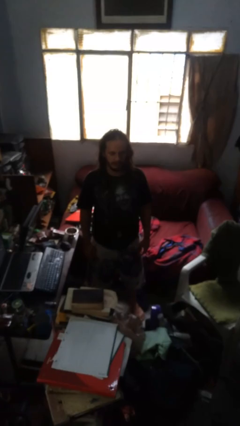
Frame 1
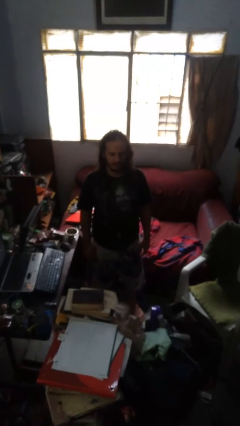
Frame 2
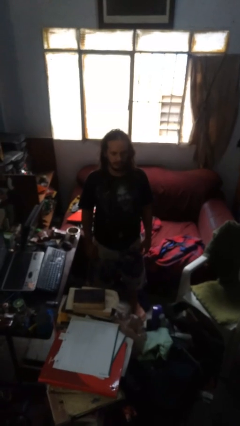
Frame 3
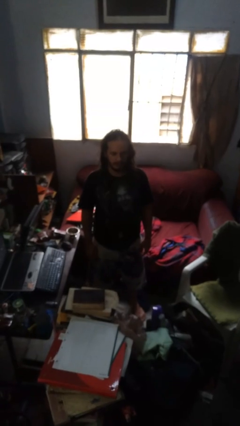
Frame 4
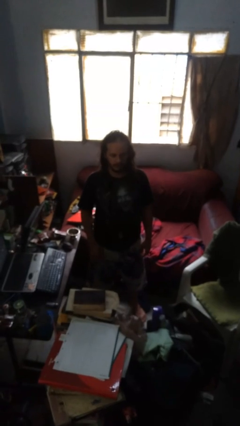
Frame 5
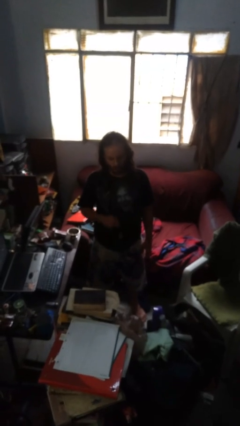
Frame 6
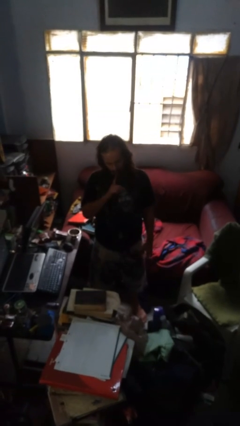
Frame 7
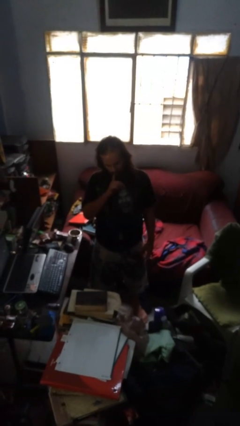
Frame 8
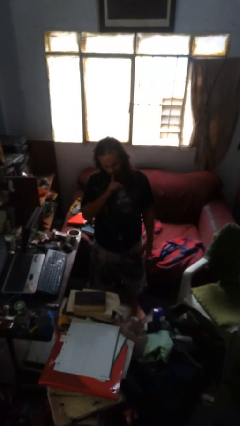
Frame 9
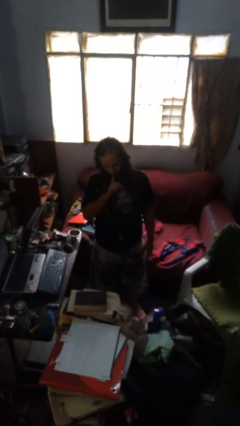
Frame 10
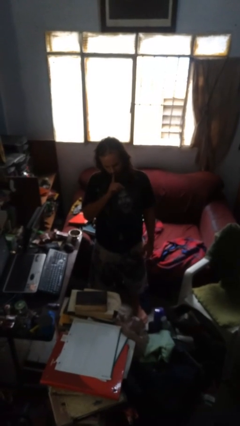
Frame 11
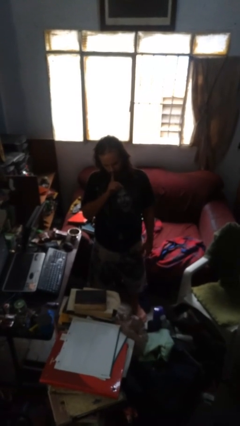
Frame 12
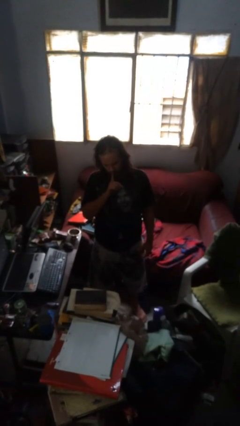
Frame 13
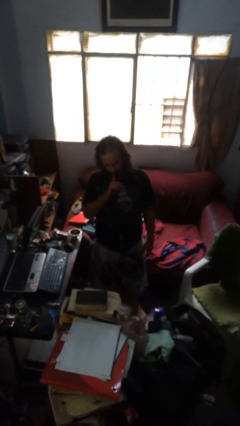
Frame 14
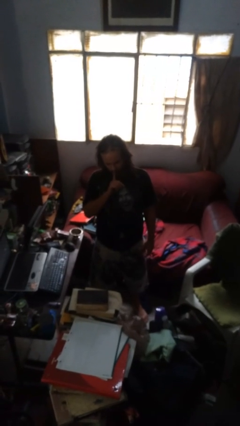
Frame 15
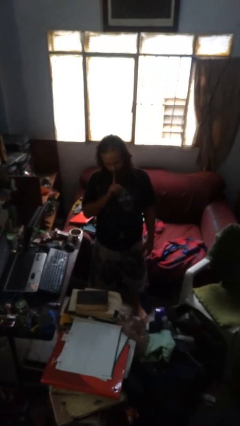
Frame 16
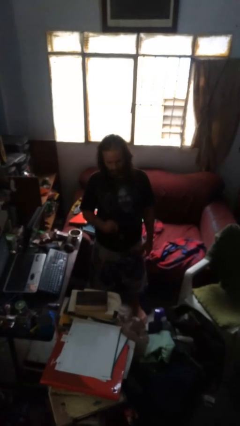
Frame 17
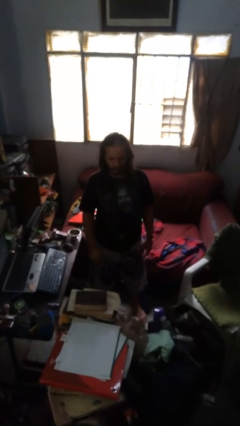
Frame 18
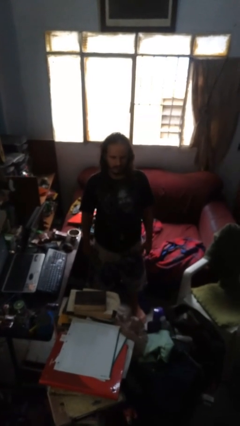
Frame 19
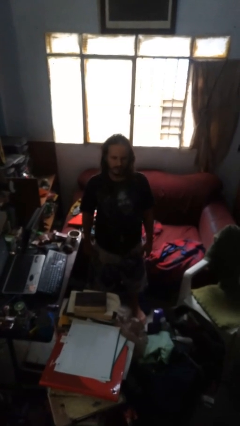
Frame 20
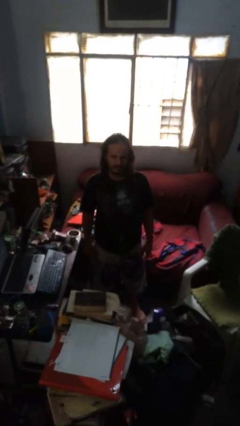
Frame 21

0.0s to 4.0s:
person gestures be quiet

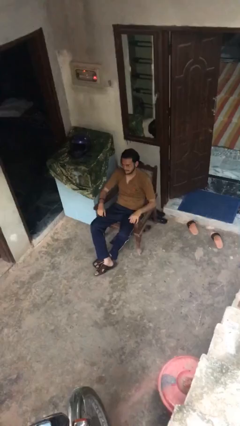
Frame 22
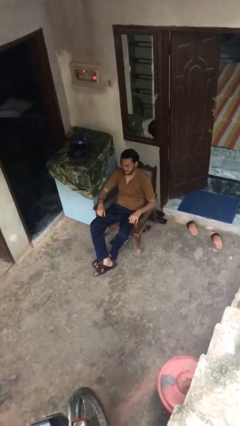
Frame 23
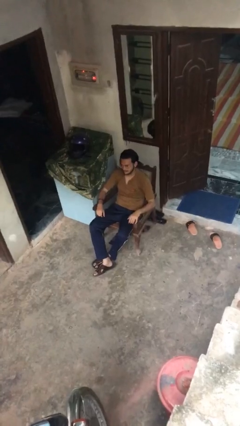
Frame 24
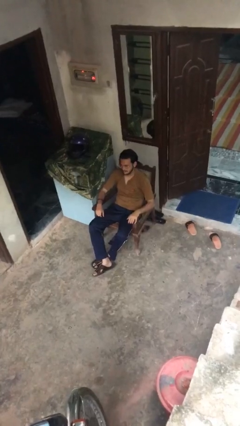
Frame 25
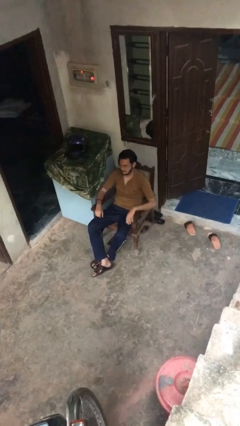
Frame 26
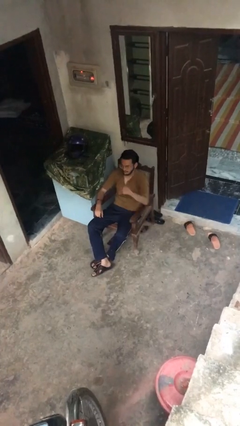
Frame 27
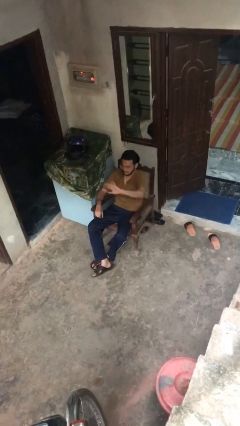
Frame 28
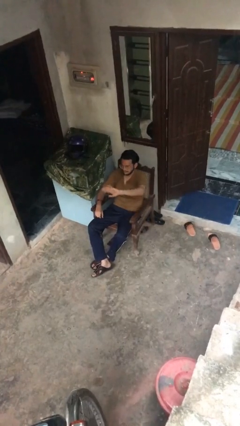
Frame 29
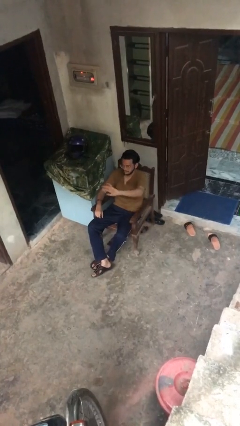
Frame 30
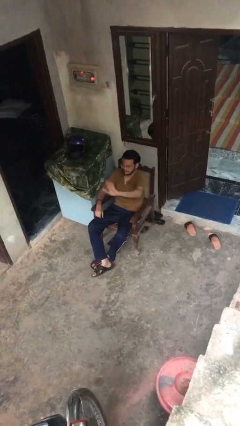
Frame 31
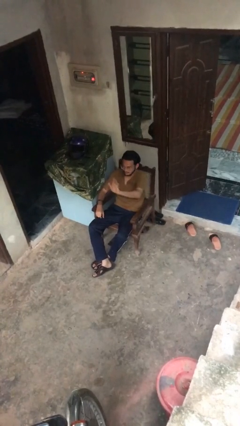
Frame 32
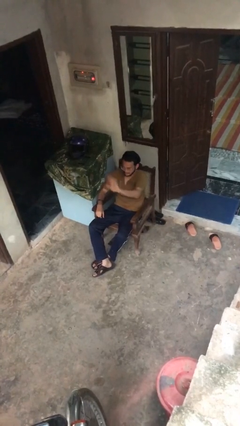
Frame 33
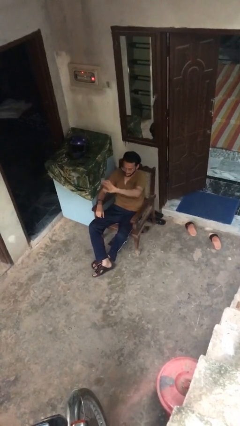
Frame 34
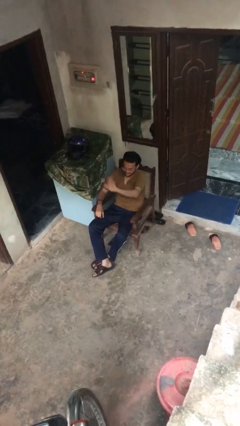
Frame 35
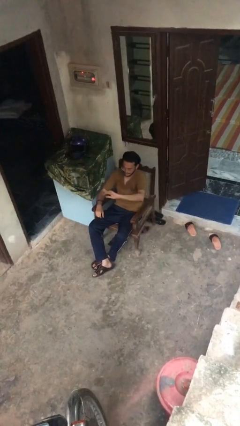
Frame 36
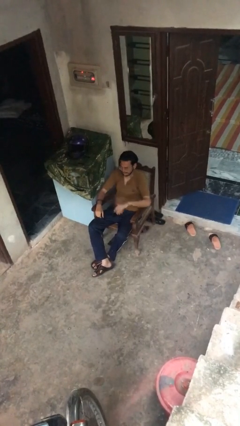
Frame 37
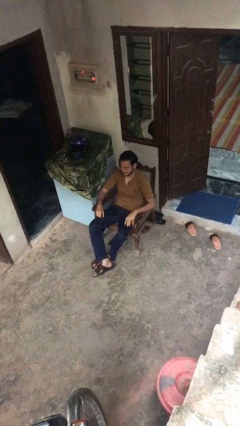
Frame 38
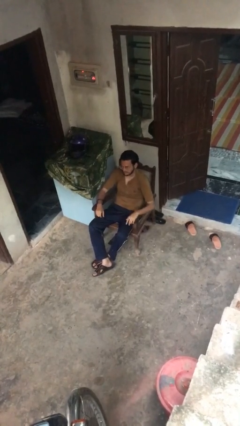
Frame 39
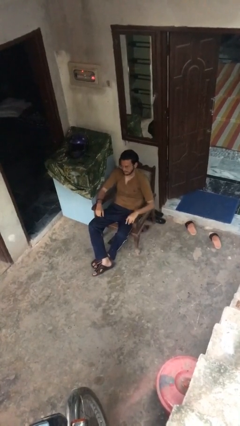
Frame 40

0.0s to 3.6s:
person waves at person

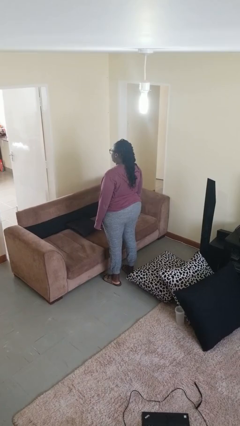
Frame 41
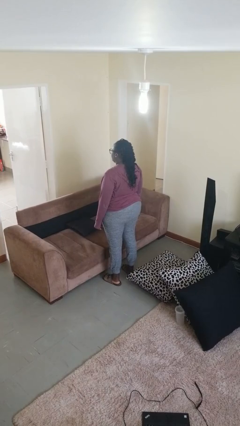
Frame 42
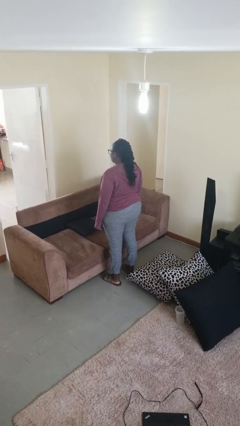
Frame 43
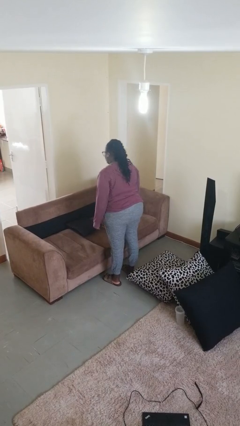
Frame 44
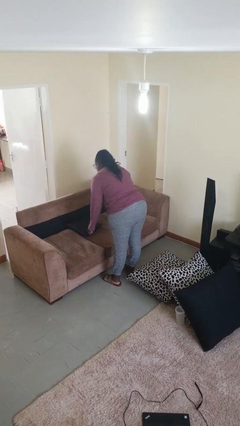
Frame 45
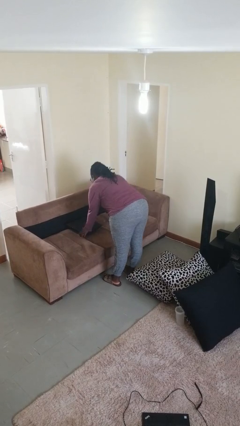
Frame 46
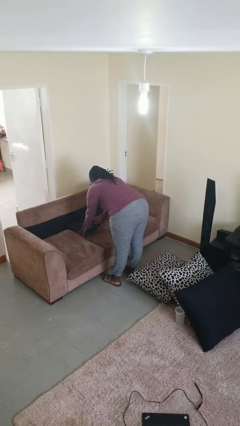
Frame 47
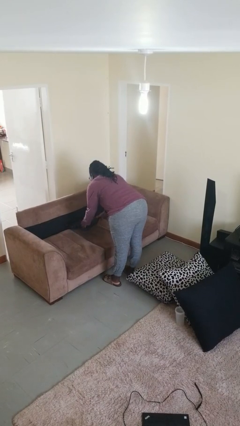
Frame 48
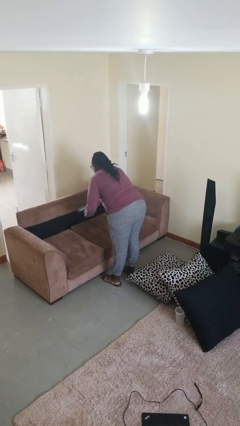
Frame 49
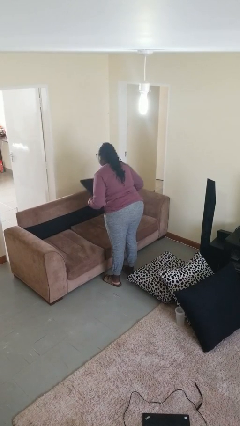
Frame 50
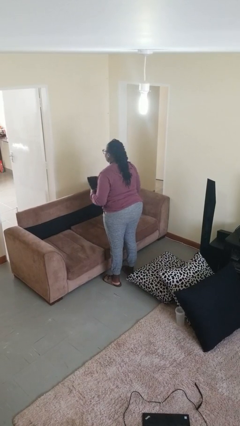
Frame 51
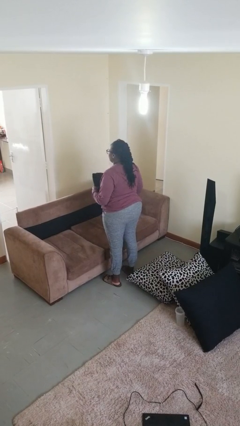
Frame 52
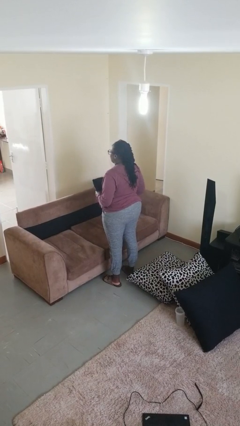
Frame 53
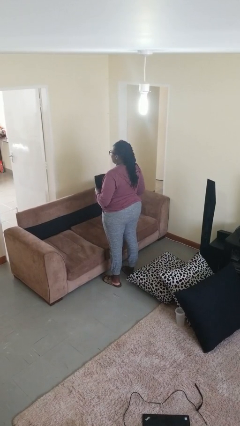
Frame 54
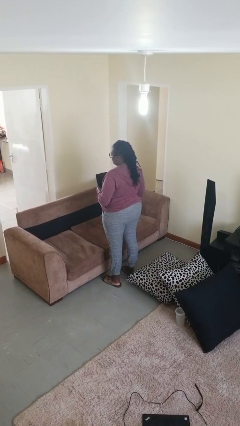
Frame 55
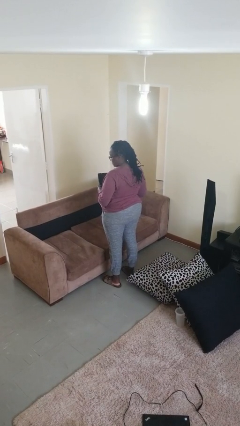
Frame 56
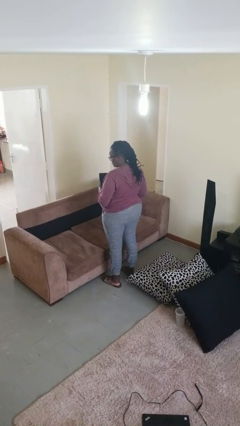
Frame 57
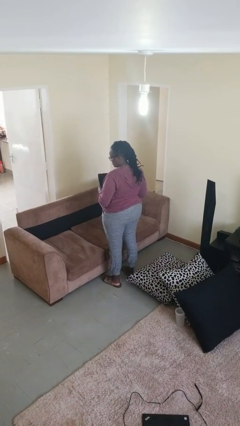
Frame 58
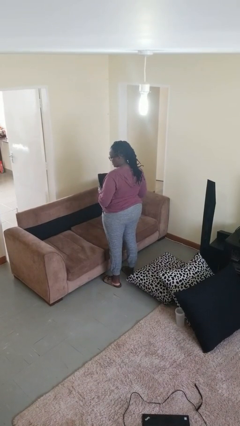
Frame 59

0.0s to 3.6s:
person picks up object from couch

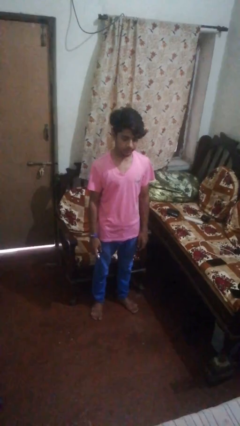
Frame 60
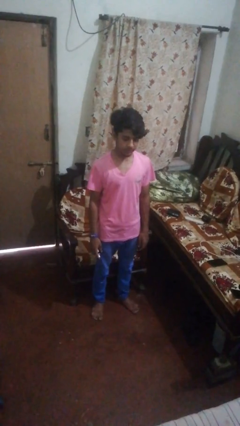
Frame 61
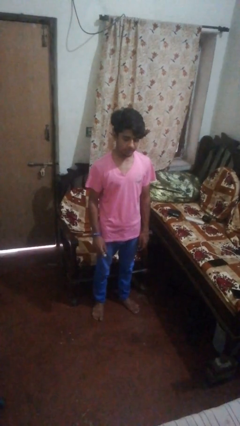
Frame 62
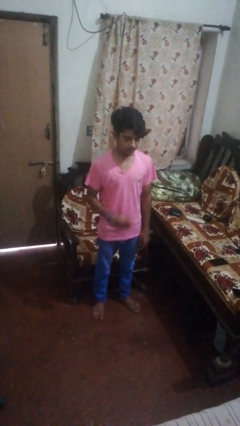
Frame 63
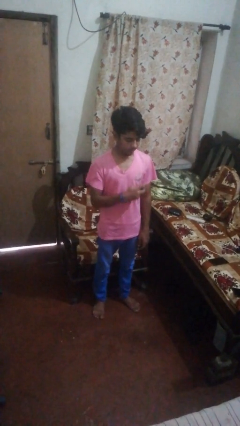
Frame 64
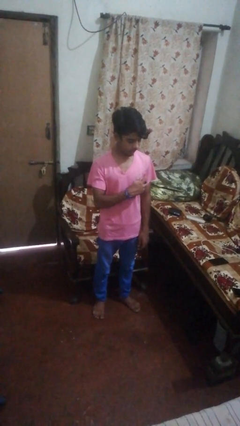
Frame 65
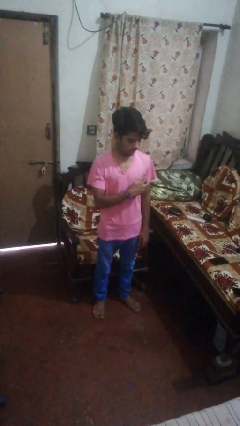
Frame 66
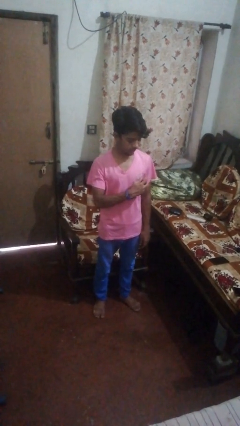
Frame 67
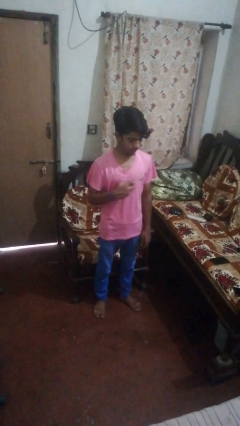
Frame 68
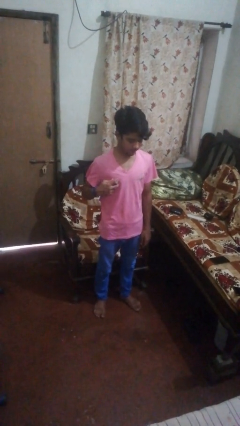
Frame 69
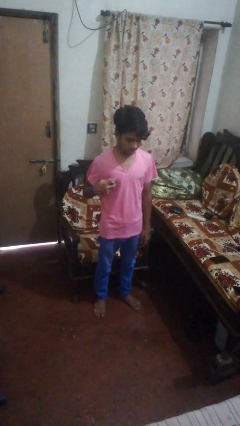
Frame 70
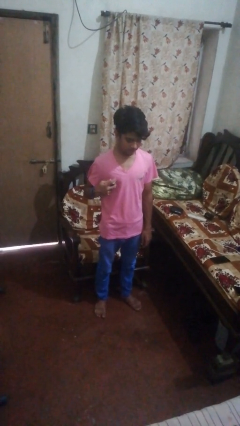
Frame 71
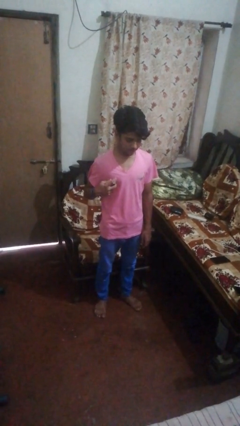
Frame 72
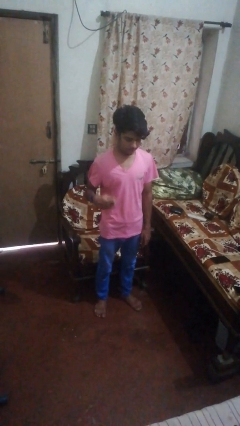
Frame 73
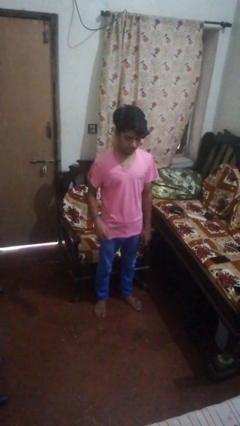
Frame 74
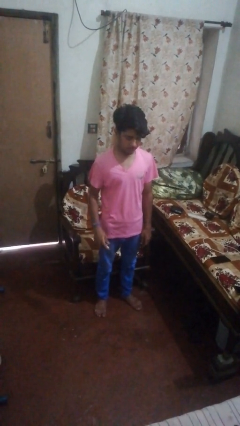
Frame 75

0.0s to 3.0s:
person applies deodorant

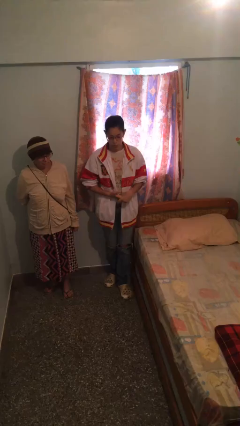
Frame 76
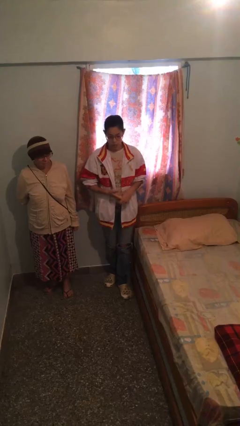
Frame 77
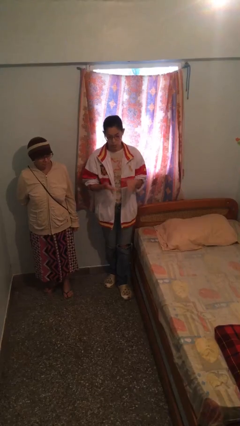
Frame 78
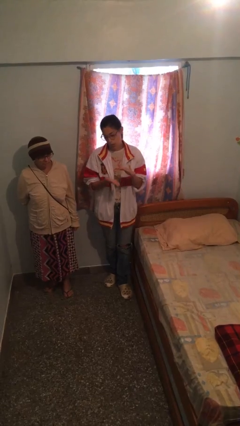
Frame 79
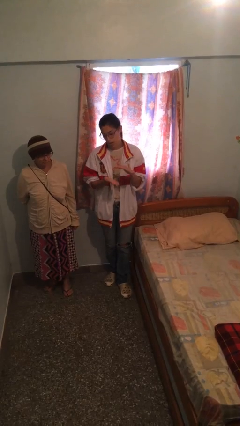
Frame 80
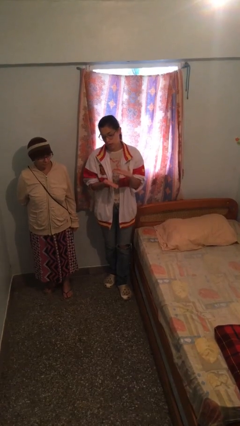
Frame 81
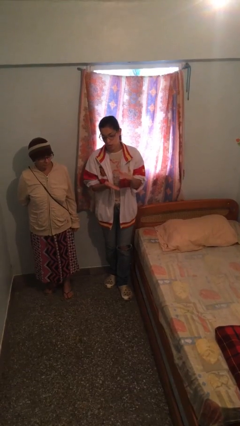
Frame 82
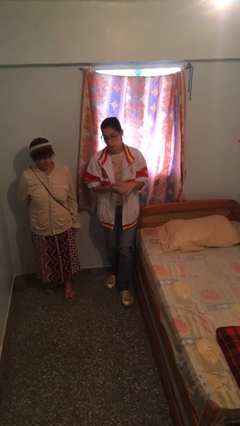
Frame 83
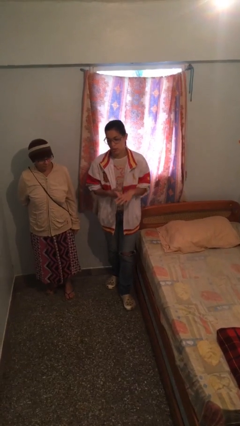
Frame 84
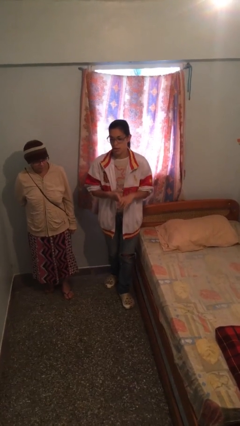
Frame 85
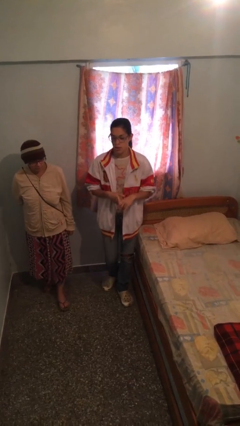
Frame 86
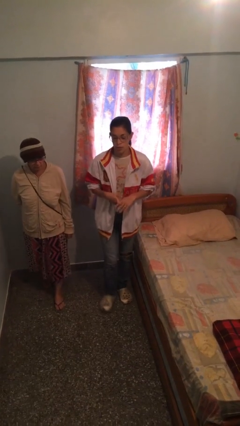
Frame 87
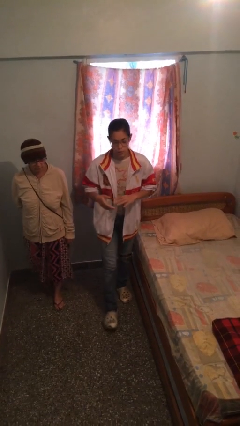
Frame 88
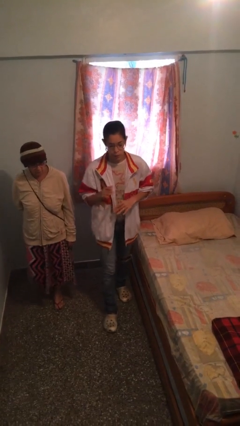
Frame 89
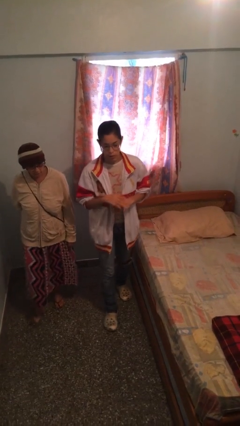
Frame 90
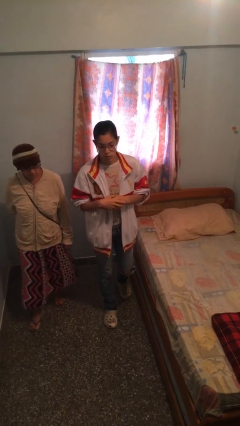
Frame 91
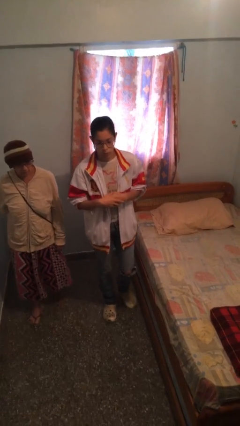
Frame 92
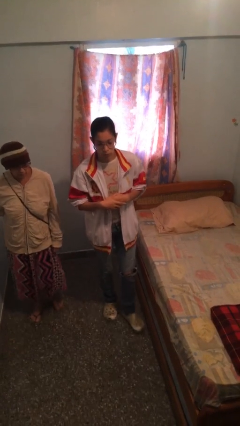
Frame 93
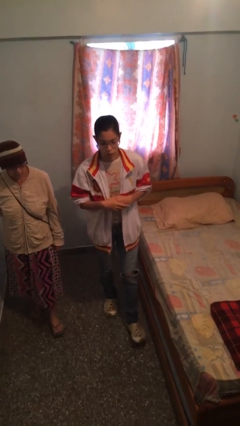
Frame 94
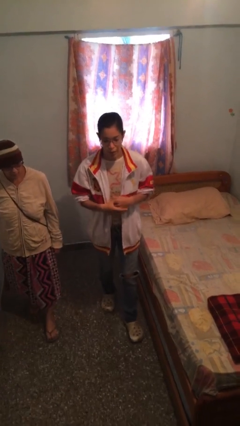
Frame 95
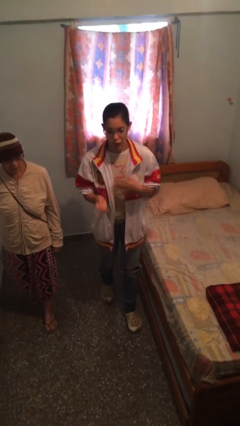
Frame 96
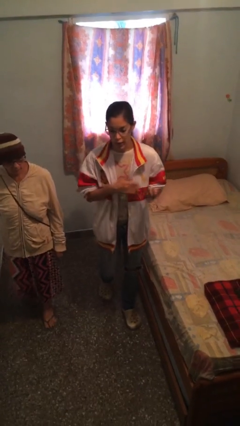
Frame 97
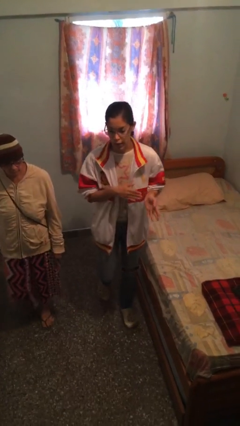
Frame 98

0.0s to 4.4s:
person talks to person
